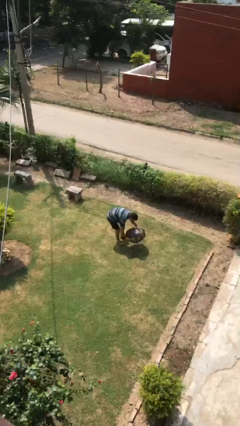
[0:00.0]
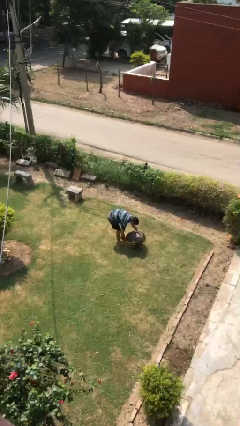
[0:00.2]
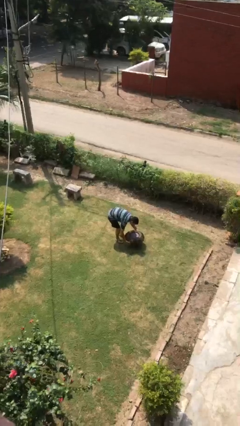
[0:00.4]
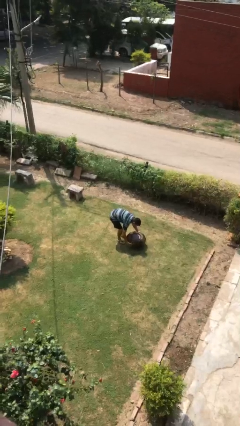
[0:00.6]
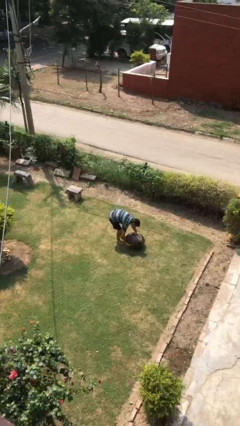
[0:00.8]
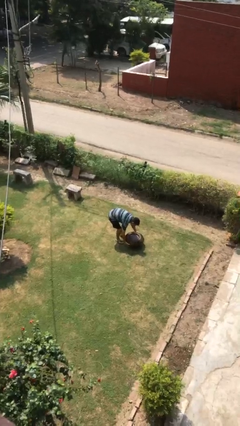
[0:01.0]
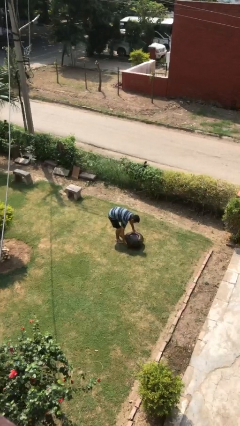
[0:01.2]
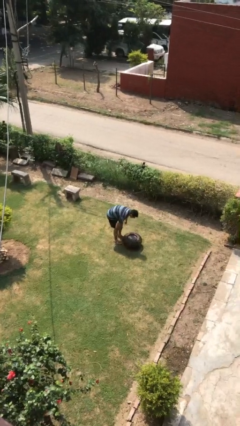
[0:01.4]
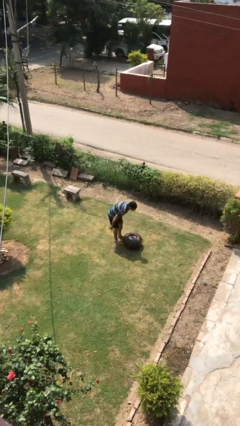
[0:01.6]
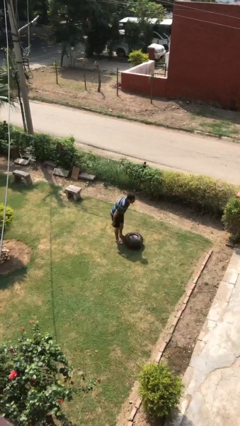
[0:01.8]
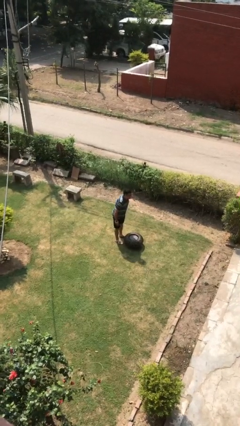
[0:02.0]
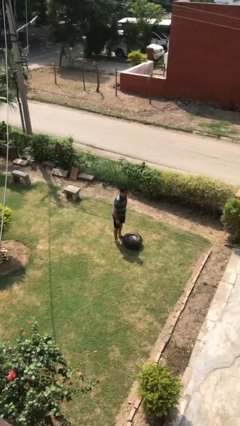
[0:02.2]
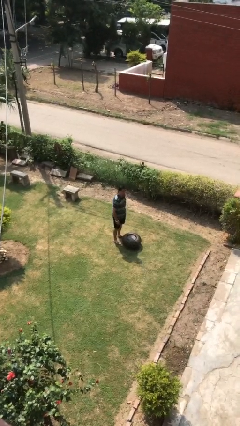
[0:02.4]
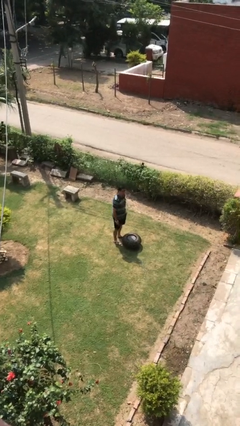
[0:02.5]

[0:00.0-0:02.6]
person puts down object on floor

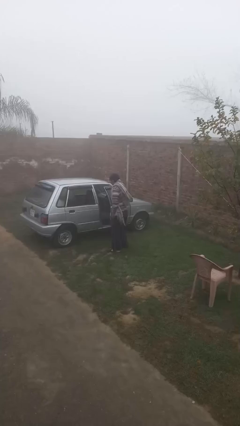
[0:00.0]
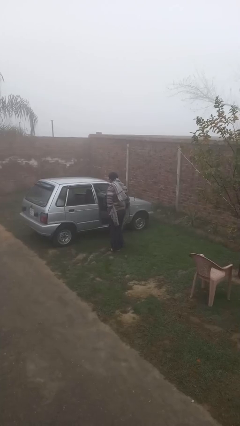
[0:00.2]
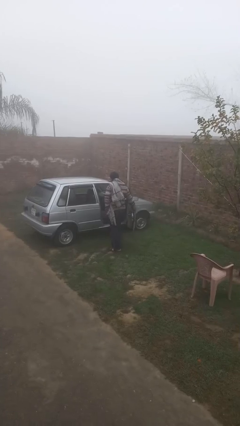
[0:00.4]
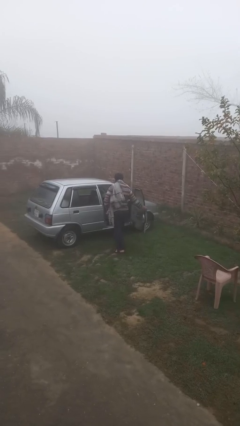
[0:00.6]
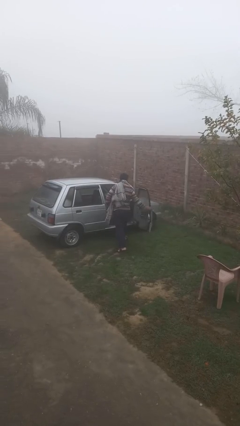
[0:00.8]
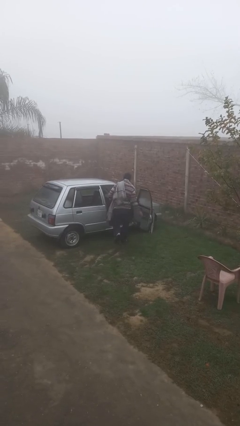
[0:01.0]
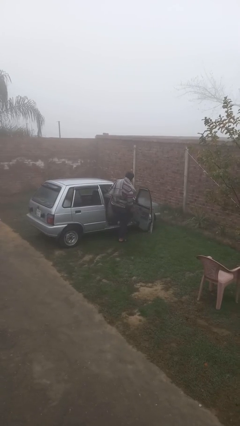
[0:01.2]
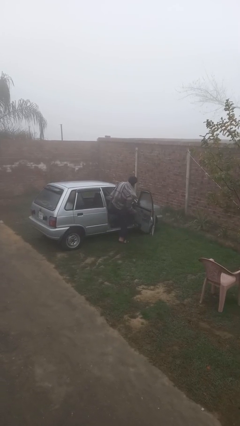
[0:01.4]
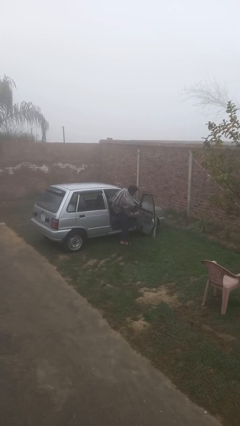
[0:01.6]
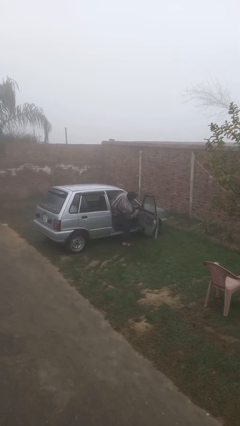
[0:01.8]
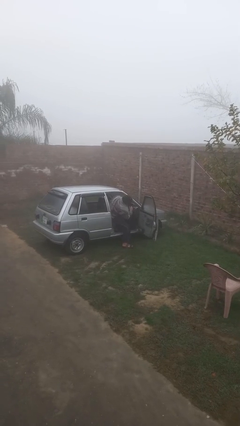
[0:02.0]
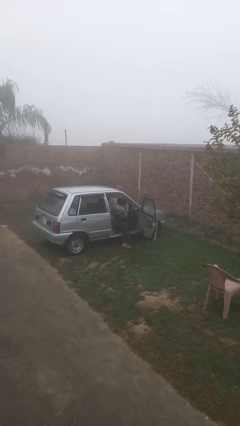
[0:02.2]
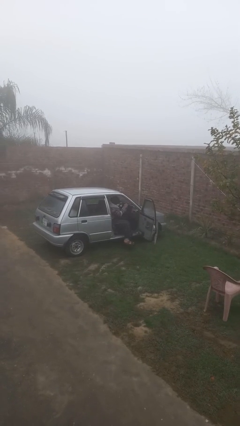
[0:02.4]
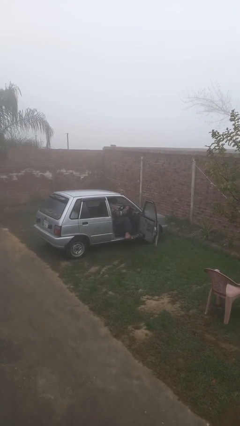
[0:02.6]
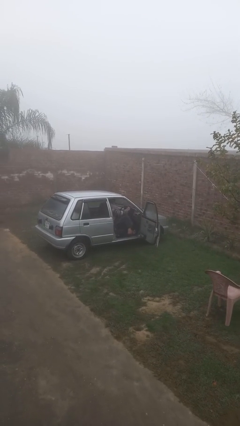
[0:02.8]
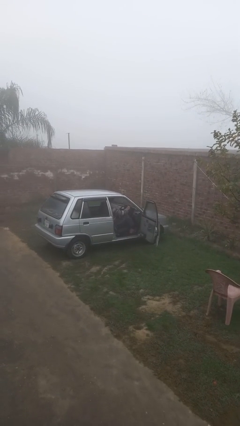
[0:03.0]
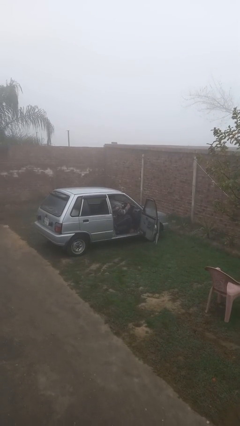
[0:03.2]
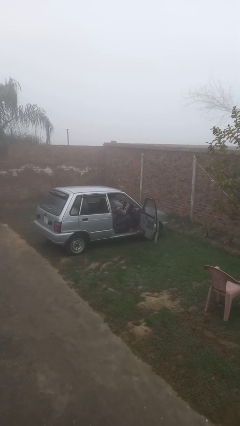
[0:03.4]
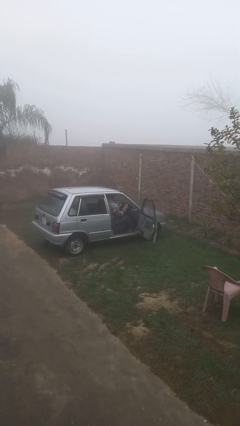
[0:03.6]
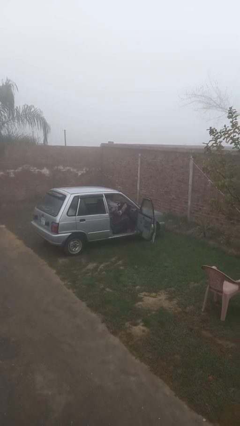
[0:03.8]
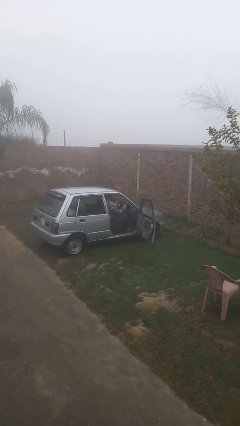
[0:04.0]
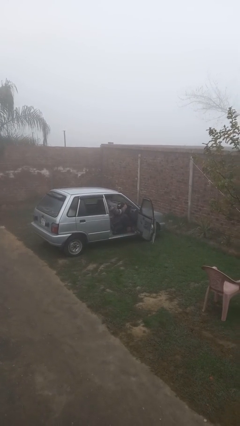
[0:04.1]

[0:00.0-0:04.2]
person enters car

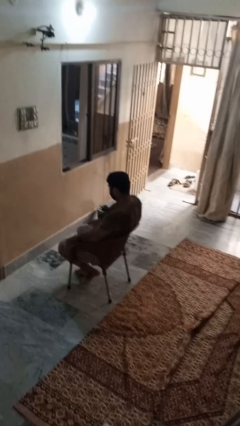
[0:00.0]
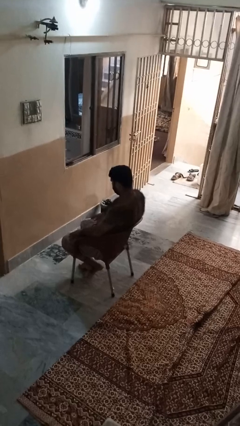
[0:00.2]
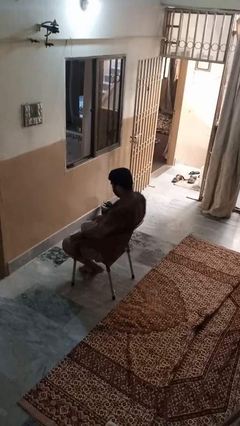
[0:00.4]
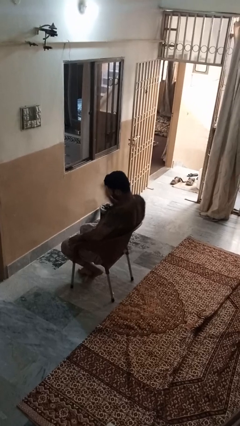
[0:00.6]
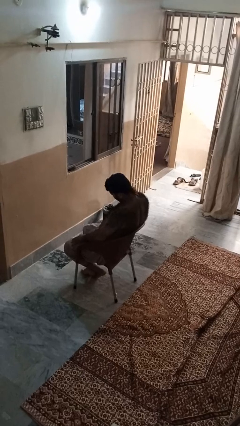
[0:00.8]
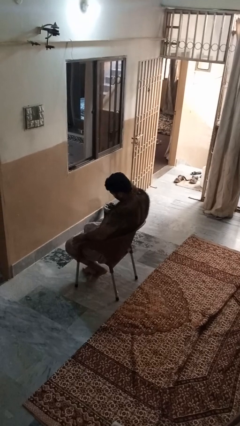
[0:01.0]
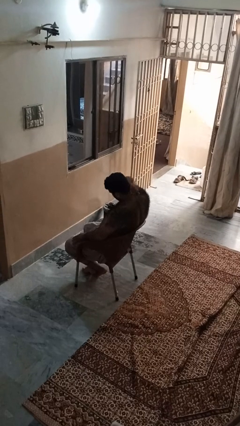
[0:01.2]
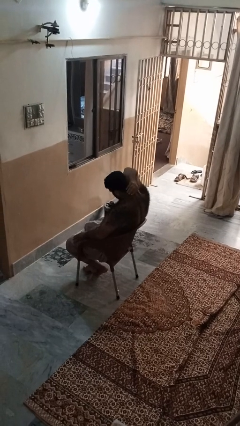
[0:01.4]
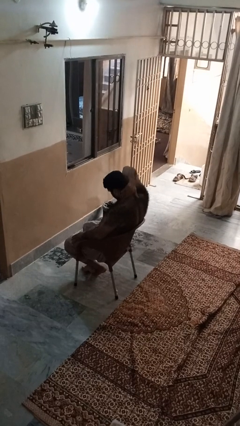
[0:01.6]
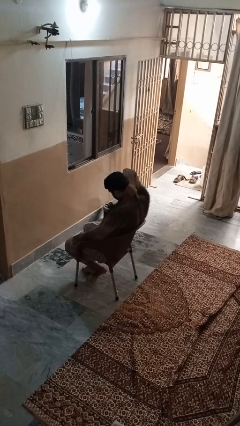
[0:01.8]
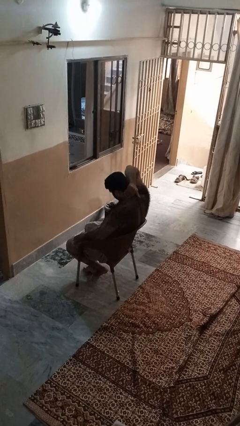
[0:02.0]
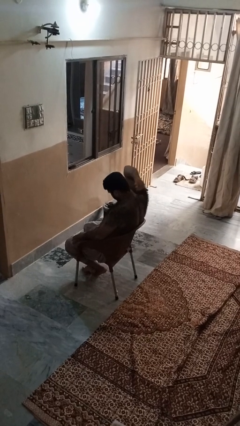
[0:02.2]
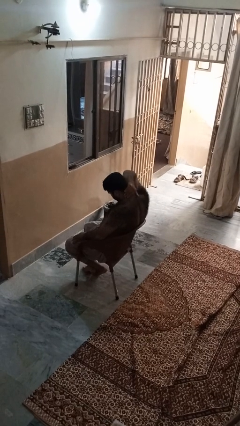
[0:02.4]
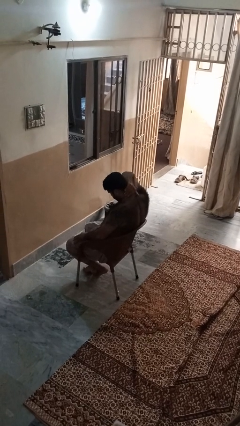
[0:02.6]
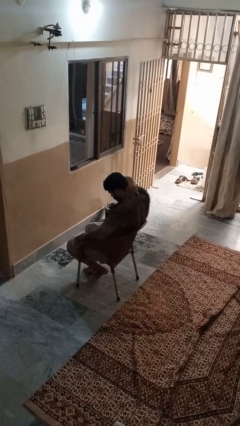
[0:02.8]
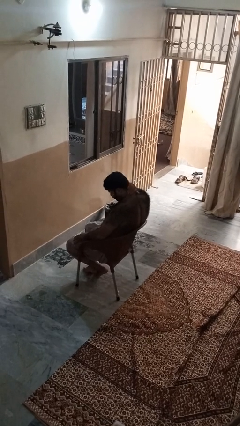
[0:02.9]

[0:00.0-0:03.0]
person rubs neck

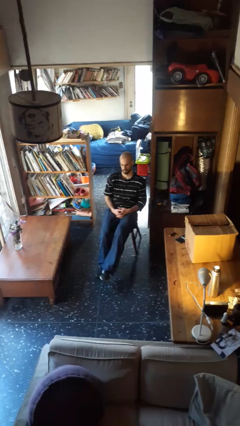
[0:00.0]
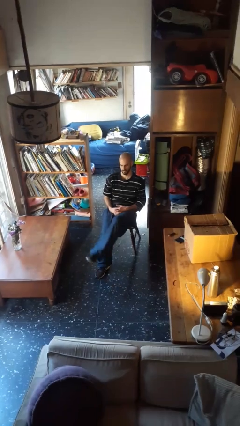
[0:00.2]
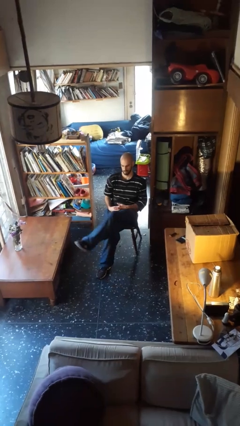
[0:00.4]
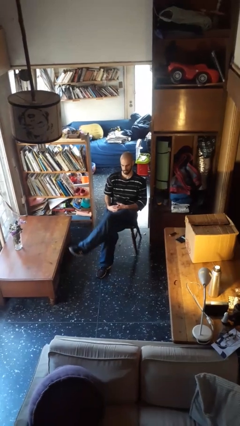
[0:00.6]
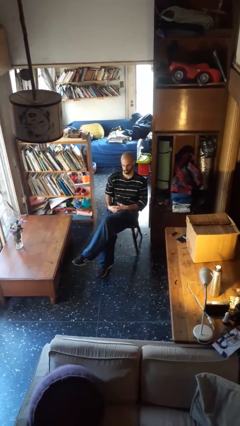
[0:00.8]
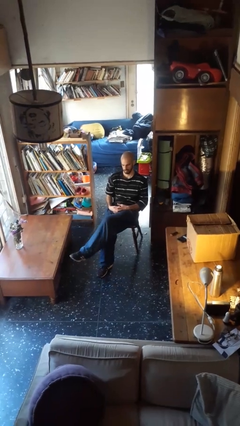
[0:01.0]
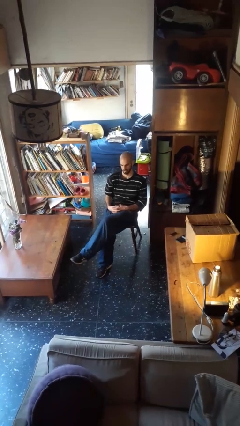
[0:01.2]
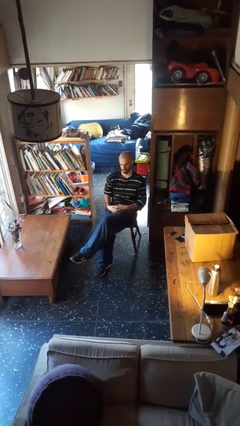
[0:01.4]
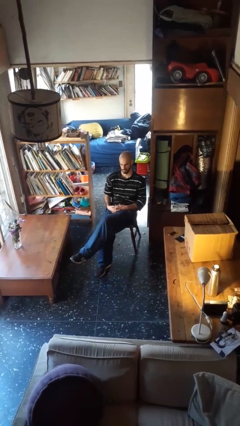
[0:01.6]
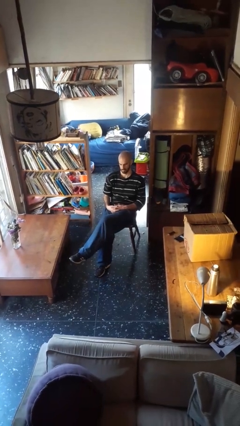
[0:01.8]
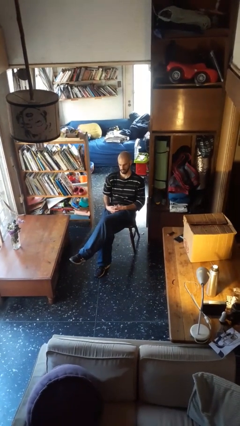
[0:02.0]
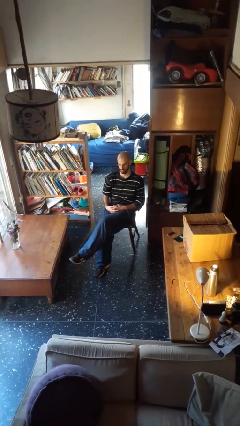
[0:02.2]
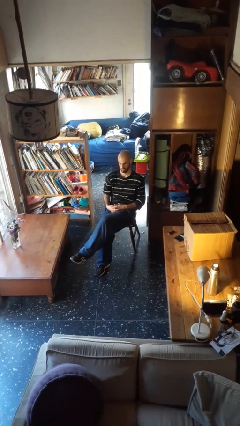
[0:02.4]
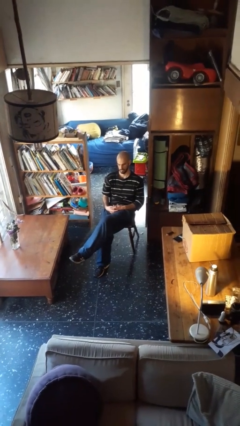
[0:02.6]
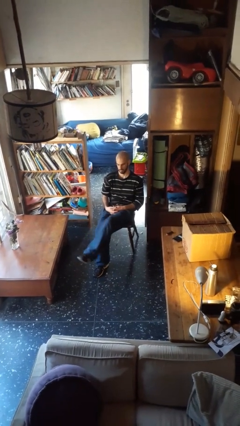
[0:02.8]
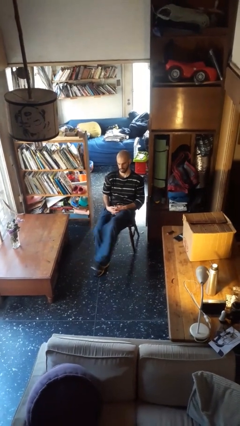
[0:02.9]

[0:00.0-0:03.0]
person crosses legs

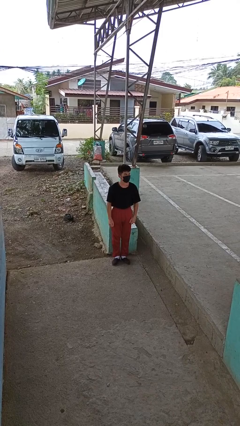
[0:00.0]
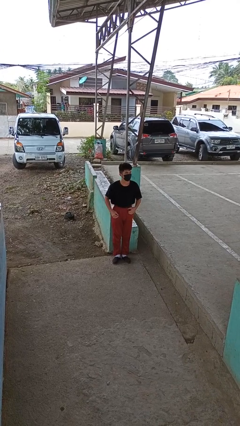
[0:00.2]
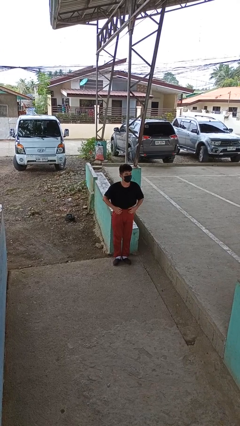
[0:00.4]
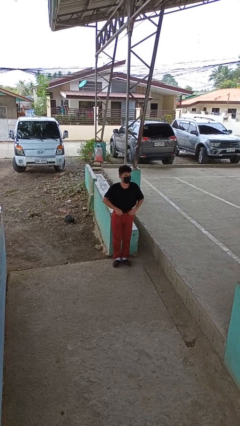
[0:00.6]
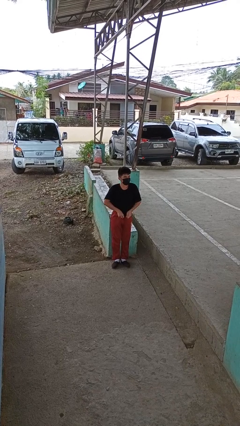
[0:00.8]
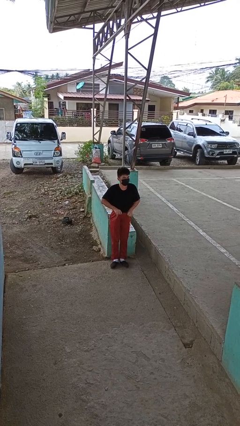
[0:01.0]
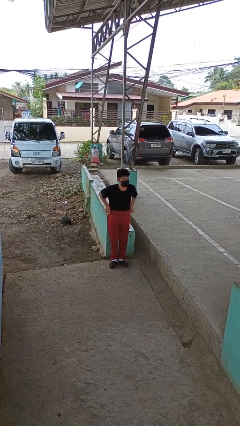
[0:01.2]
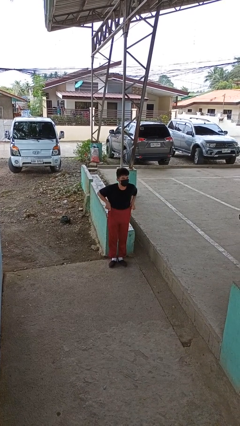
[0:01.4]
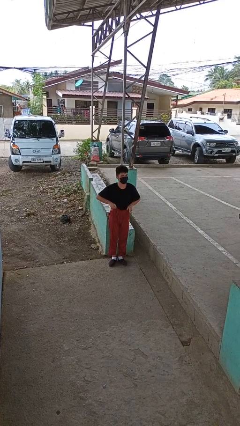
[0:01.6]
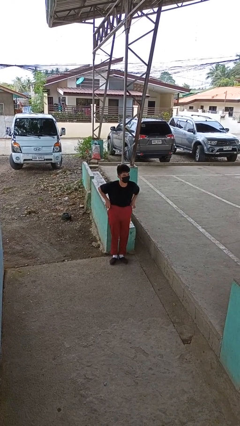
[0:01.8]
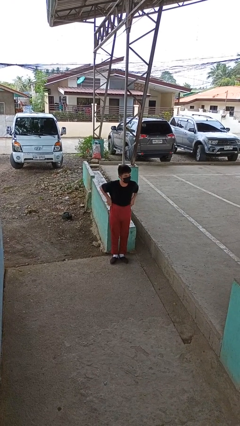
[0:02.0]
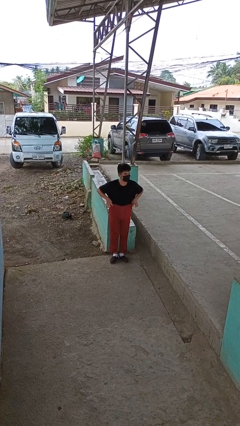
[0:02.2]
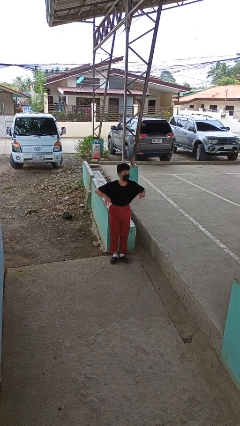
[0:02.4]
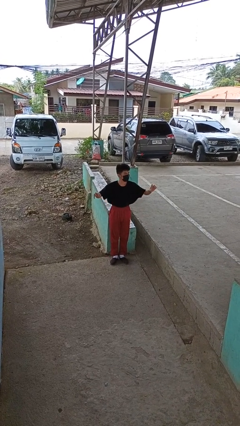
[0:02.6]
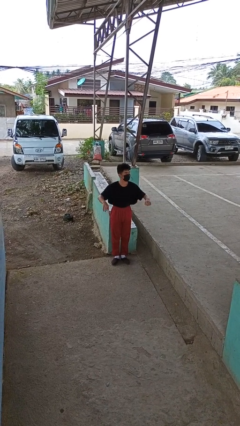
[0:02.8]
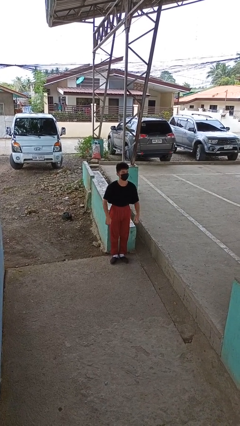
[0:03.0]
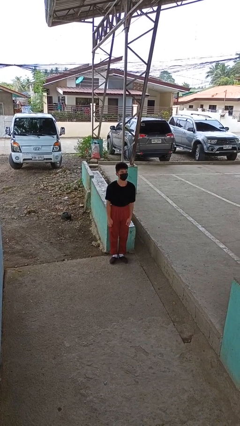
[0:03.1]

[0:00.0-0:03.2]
person hikes up pants

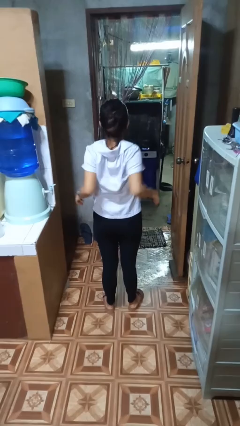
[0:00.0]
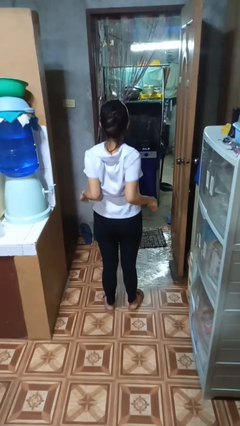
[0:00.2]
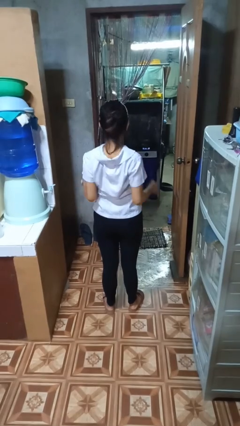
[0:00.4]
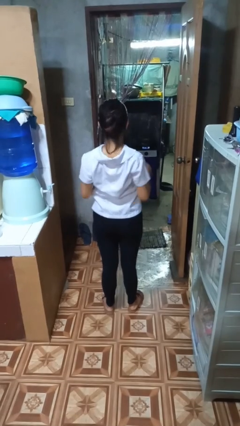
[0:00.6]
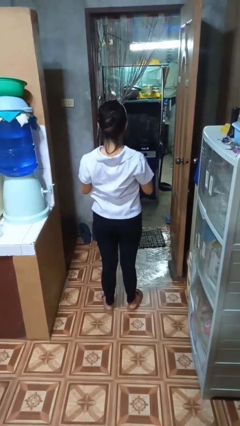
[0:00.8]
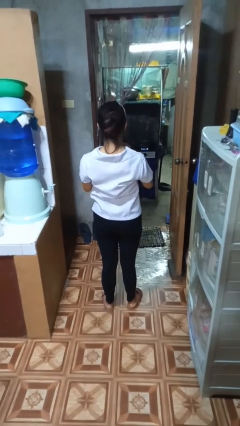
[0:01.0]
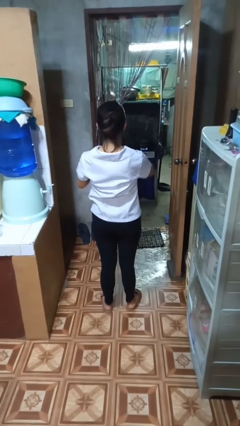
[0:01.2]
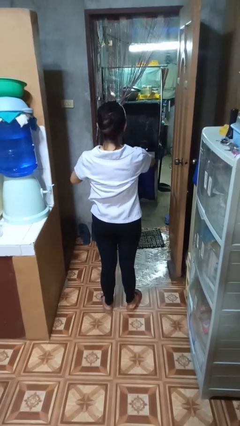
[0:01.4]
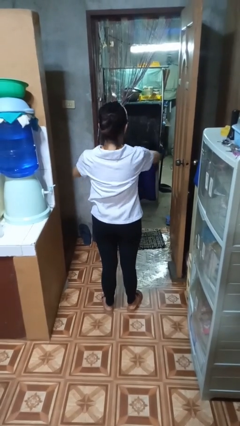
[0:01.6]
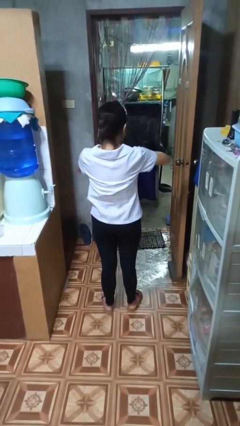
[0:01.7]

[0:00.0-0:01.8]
person stretches back
